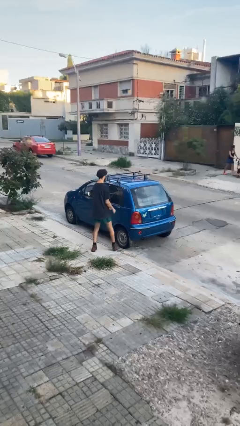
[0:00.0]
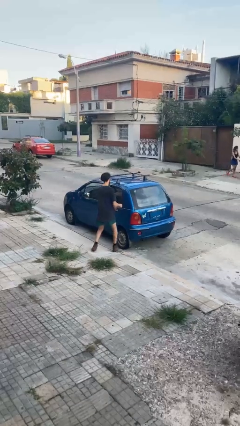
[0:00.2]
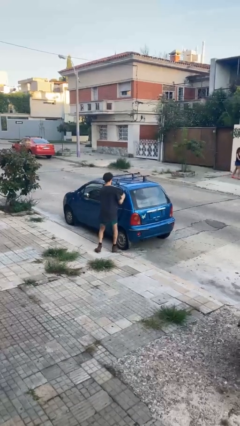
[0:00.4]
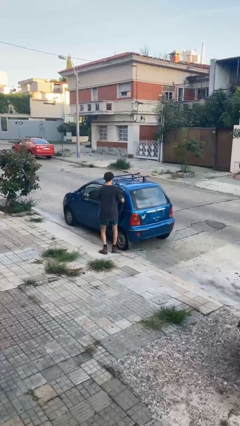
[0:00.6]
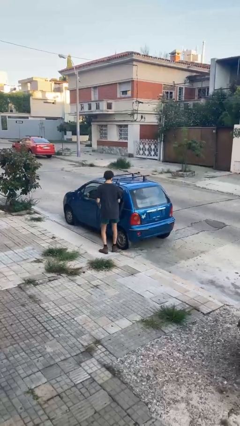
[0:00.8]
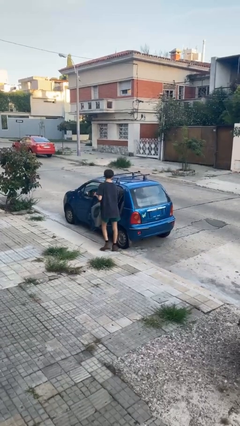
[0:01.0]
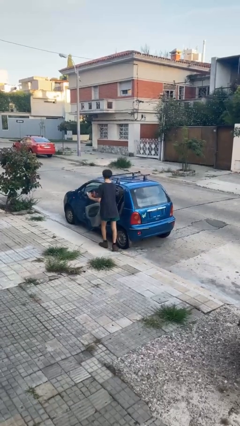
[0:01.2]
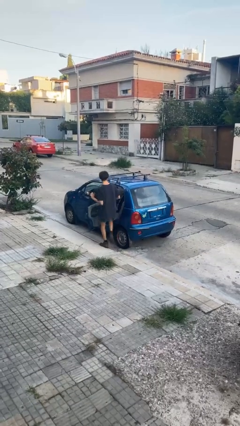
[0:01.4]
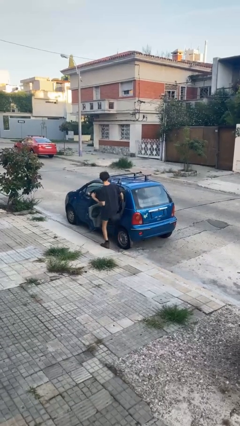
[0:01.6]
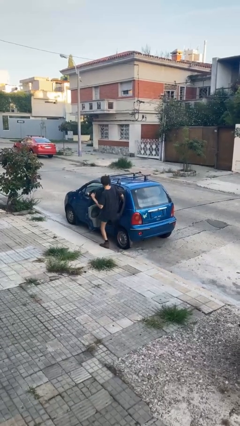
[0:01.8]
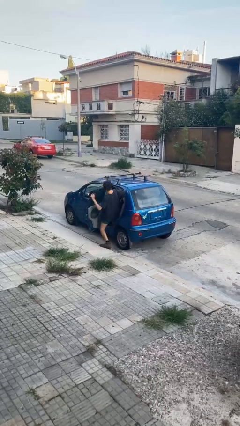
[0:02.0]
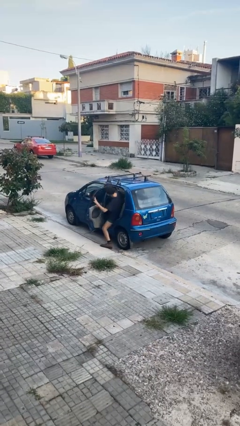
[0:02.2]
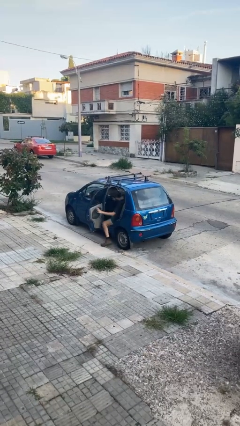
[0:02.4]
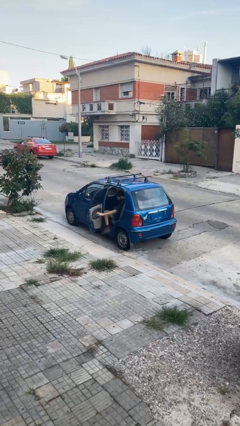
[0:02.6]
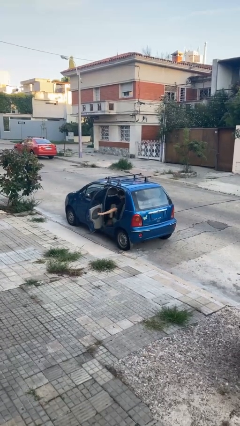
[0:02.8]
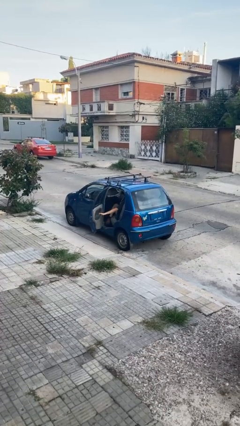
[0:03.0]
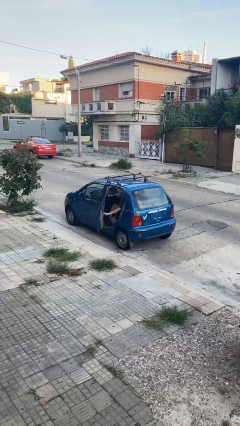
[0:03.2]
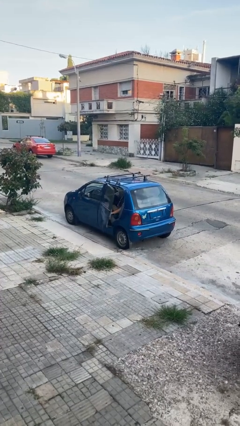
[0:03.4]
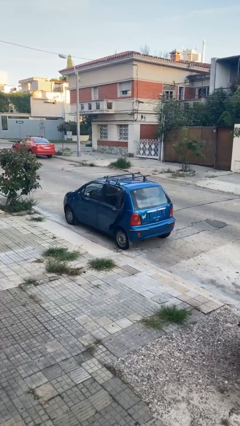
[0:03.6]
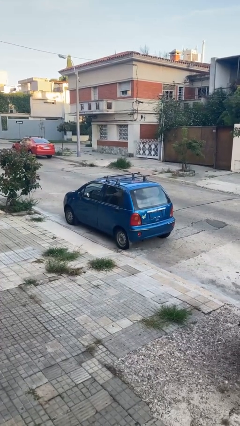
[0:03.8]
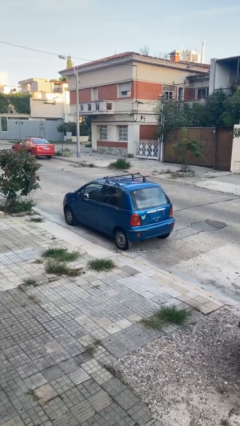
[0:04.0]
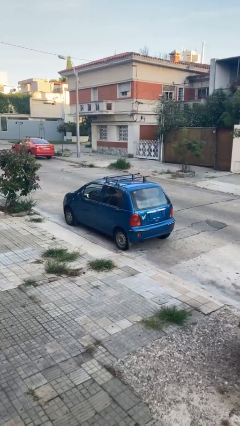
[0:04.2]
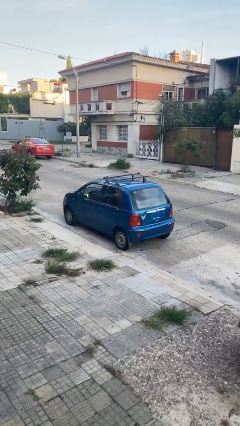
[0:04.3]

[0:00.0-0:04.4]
car picks up person

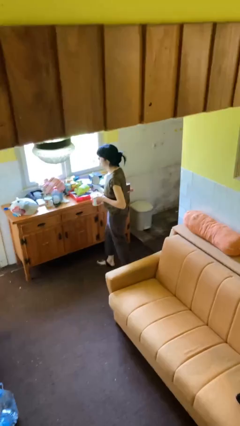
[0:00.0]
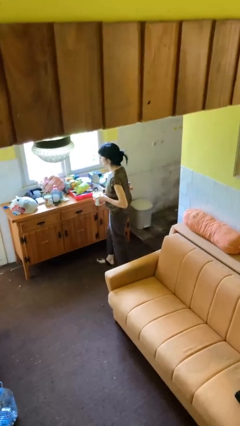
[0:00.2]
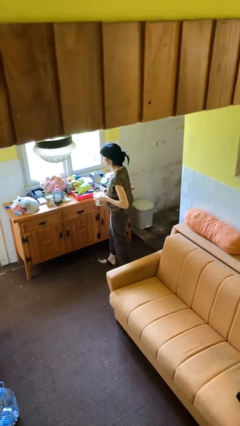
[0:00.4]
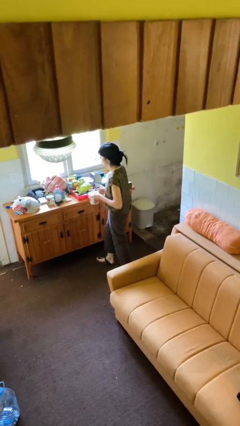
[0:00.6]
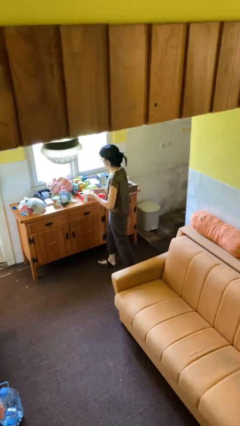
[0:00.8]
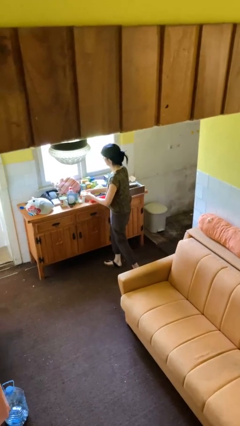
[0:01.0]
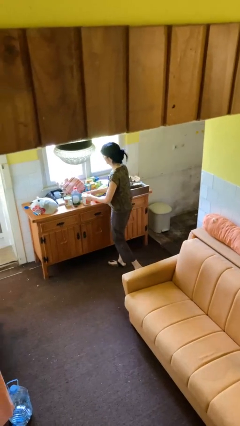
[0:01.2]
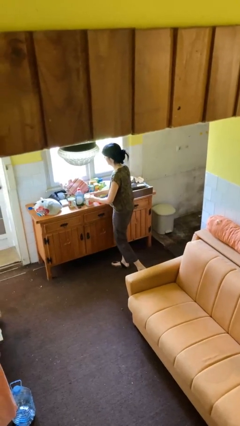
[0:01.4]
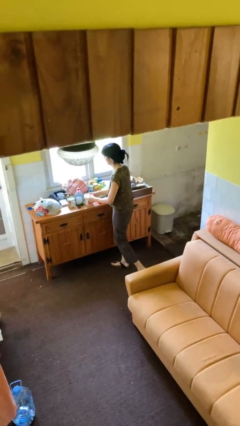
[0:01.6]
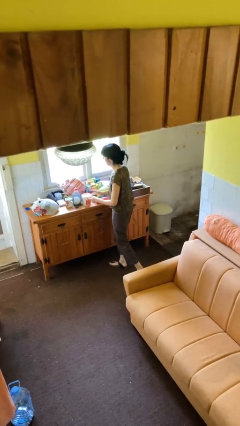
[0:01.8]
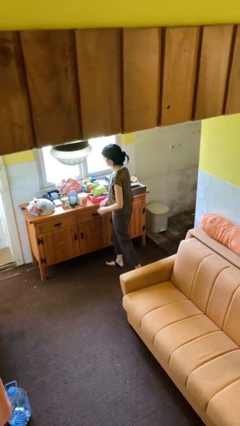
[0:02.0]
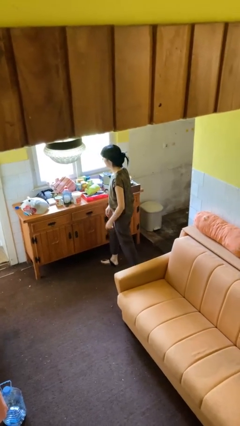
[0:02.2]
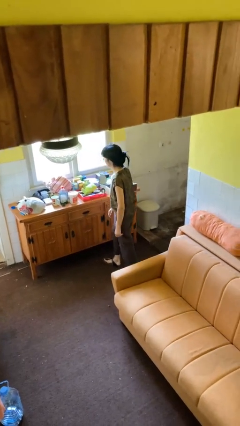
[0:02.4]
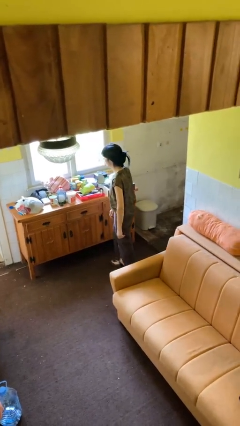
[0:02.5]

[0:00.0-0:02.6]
person puts down object on countertop

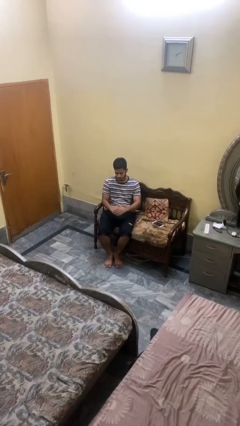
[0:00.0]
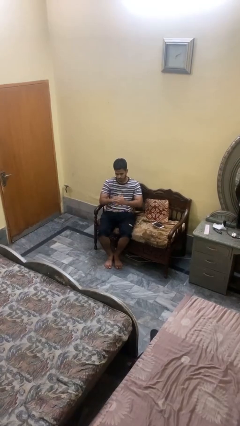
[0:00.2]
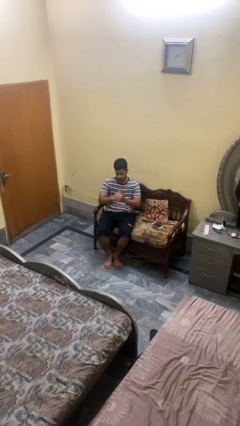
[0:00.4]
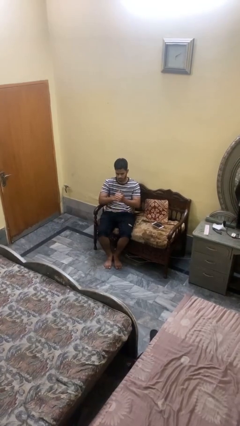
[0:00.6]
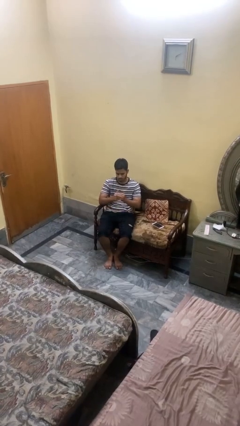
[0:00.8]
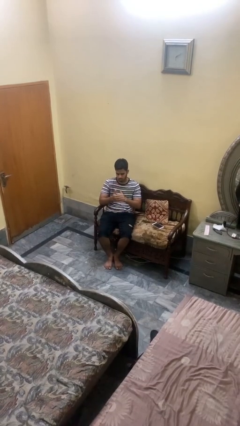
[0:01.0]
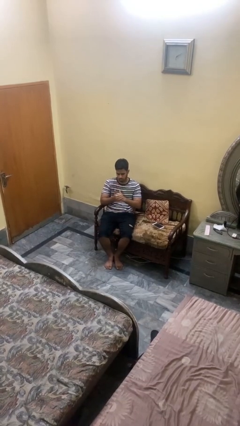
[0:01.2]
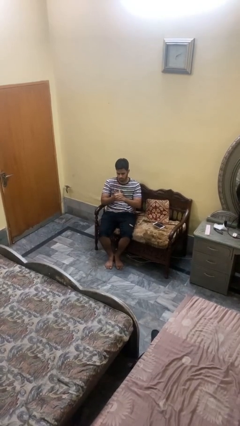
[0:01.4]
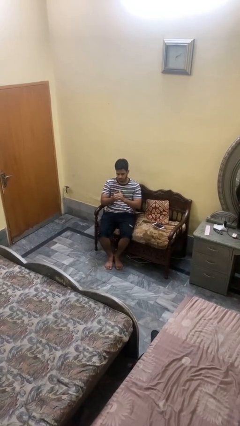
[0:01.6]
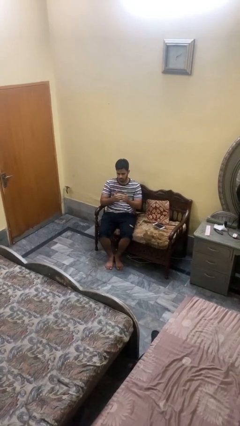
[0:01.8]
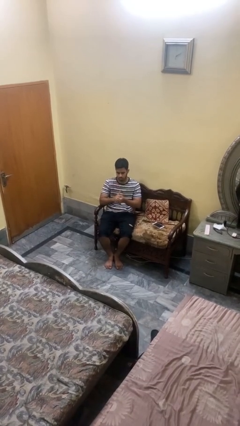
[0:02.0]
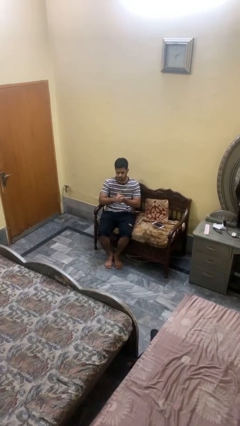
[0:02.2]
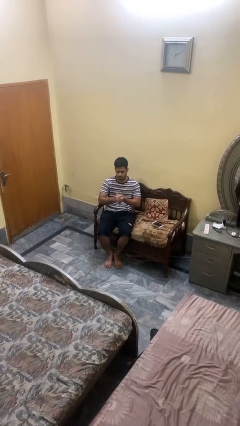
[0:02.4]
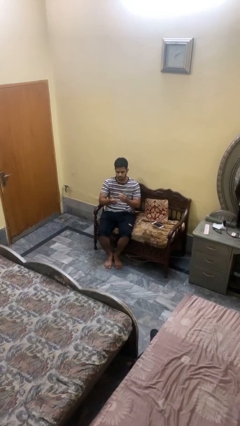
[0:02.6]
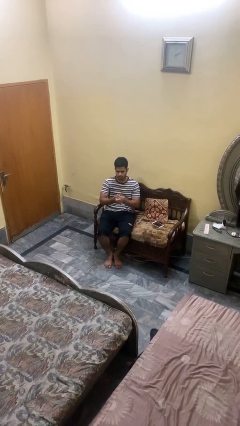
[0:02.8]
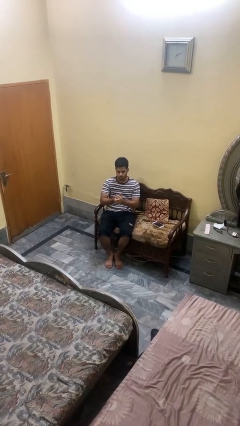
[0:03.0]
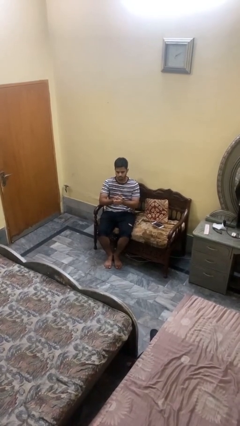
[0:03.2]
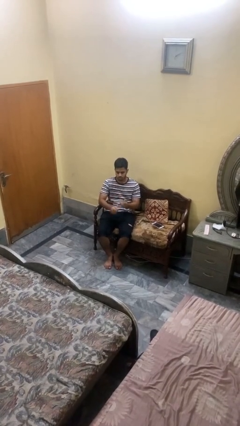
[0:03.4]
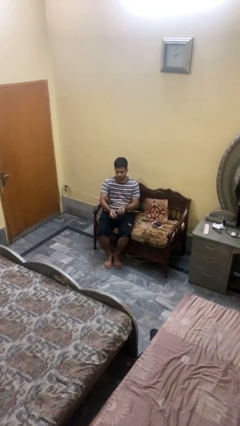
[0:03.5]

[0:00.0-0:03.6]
person cracks knuckles

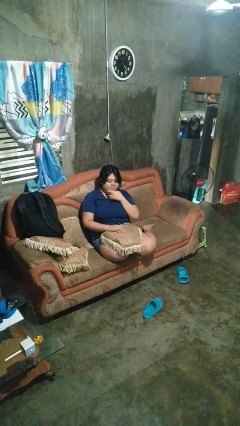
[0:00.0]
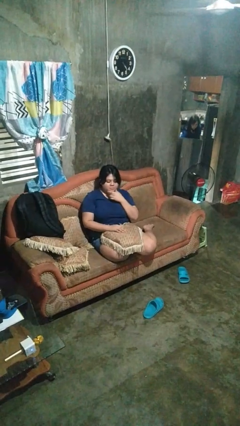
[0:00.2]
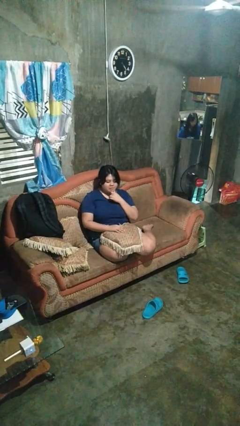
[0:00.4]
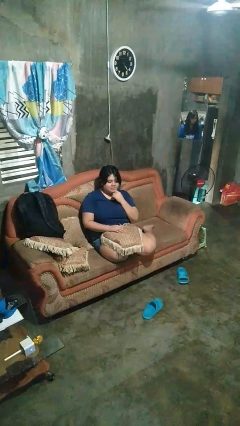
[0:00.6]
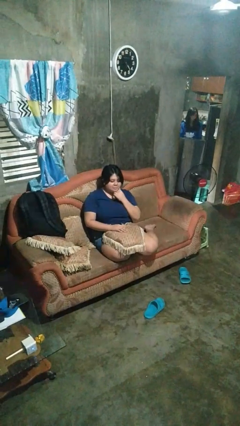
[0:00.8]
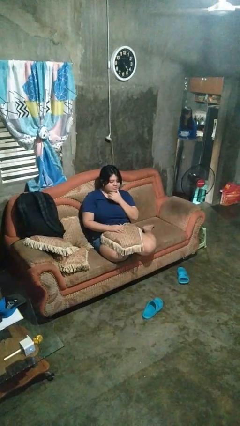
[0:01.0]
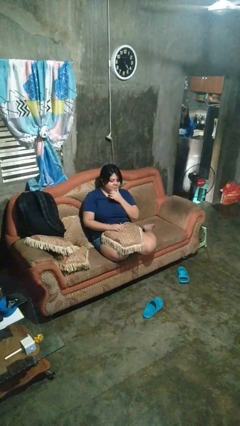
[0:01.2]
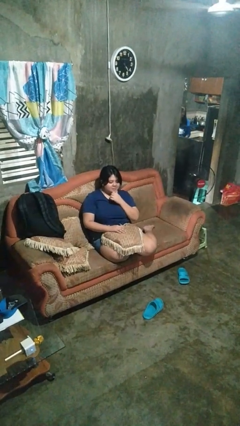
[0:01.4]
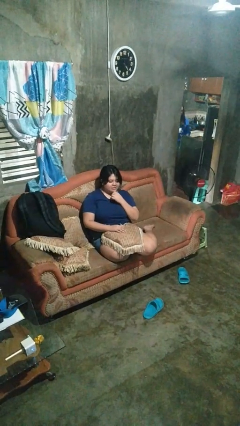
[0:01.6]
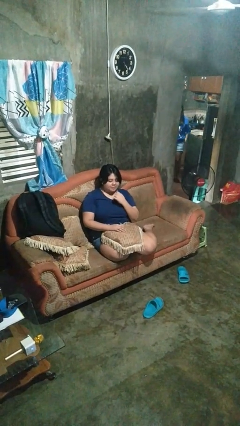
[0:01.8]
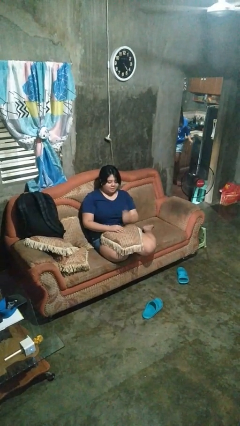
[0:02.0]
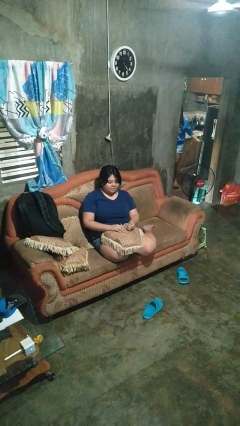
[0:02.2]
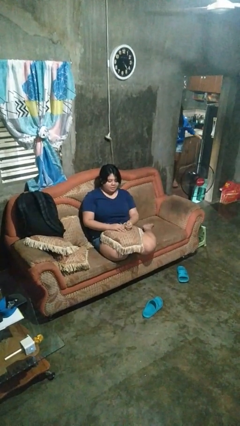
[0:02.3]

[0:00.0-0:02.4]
person strokes chin

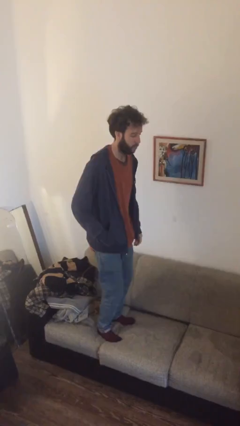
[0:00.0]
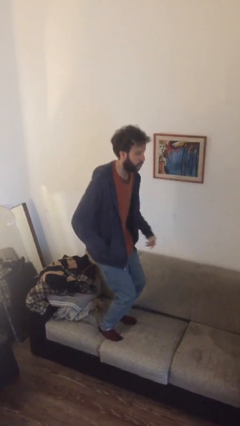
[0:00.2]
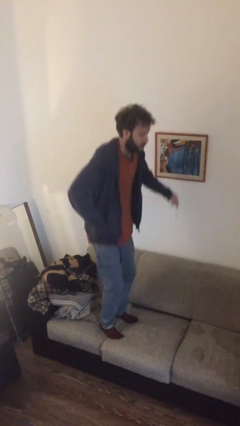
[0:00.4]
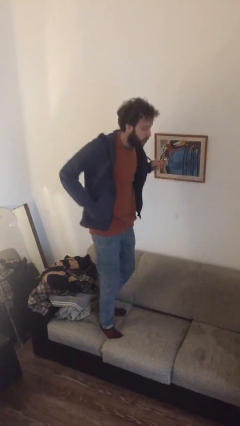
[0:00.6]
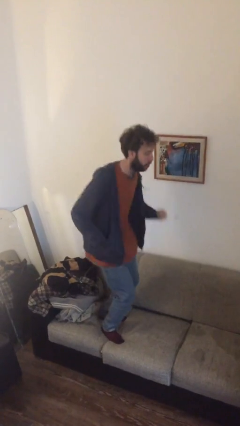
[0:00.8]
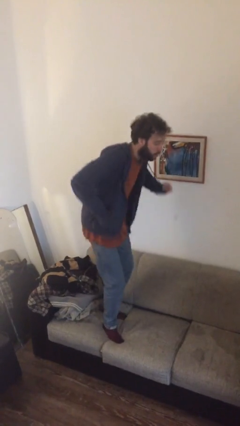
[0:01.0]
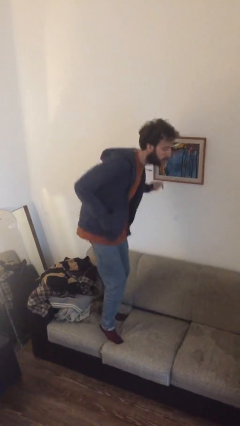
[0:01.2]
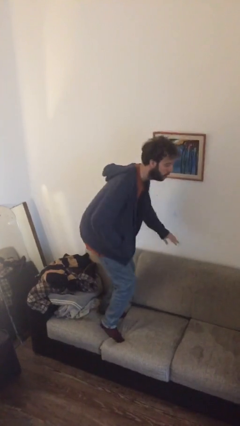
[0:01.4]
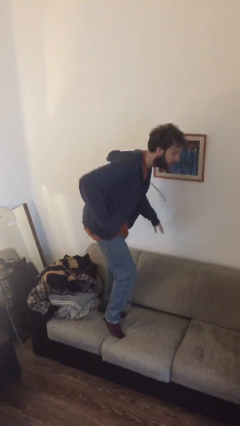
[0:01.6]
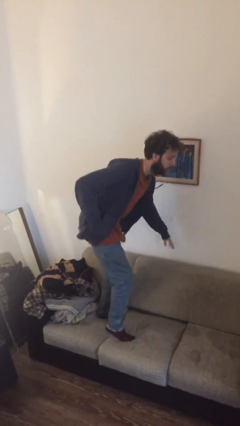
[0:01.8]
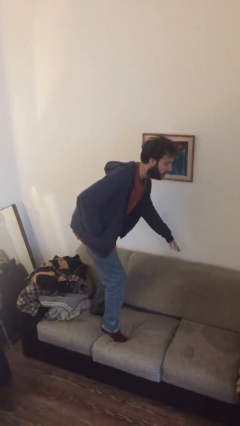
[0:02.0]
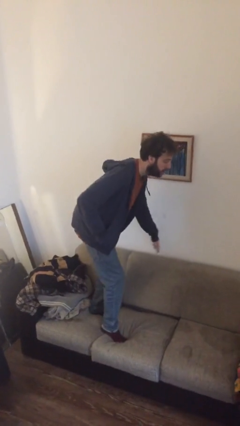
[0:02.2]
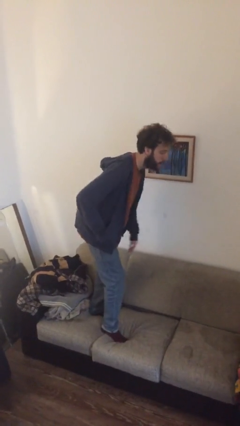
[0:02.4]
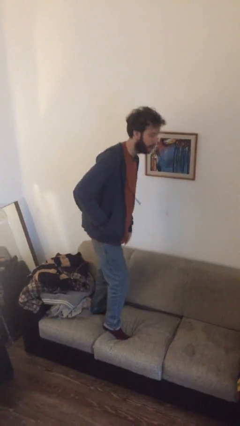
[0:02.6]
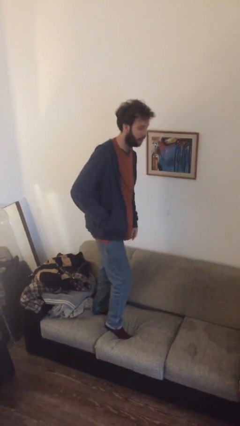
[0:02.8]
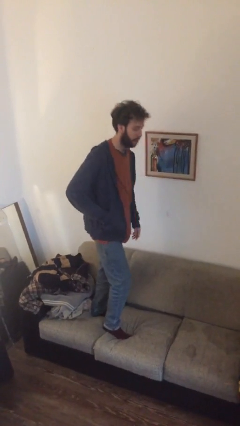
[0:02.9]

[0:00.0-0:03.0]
person jumps on couch

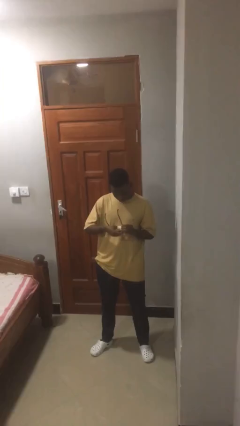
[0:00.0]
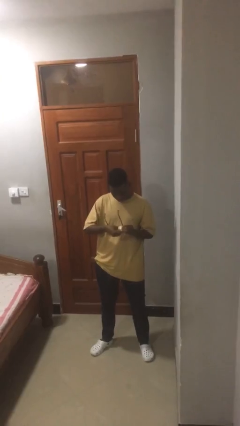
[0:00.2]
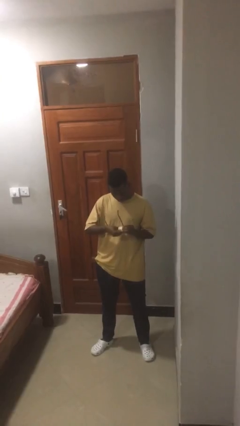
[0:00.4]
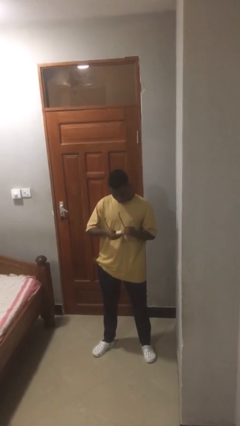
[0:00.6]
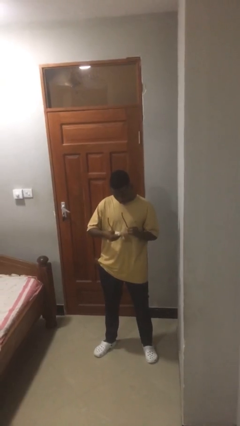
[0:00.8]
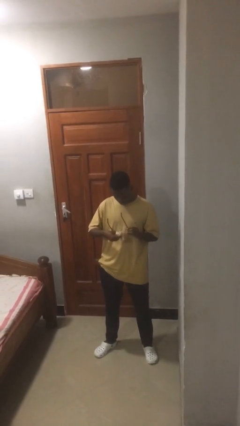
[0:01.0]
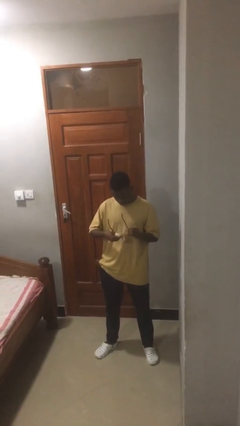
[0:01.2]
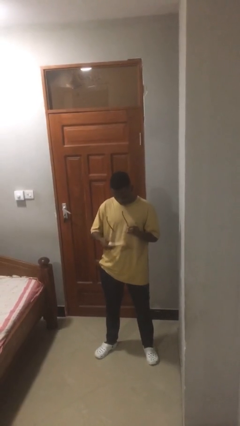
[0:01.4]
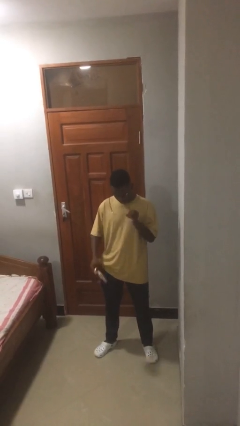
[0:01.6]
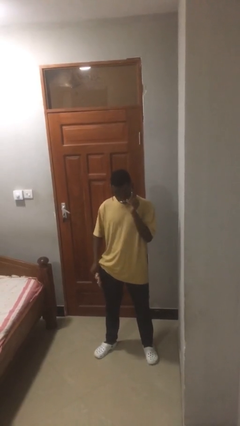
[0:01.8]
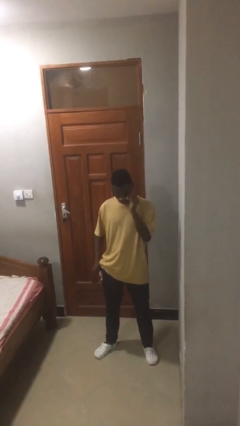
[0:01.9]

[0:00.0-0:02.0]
person cleans eyeglasses
